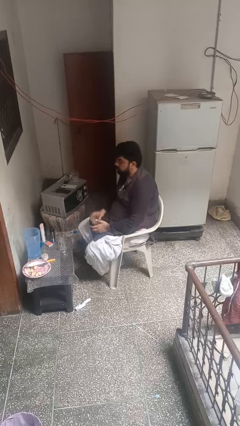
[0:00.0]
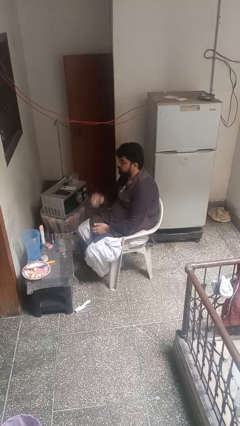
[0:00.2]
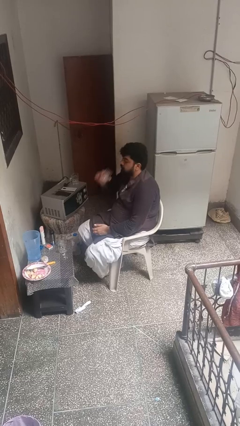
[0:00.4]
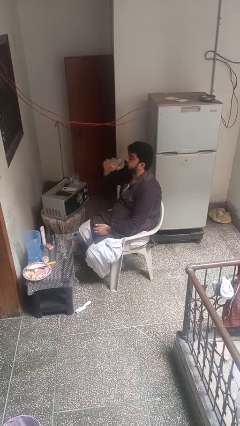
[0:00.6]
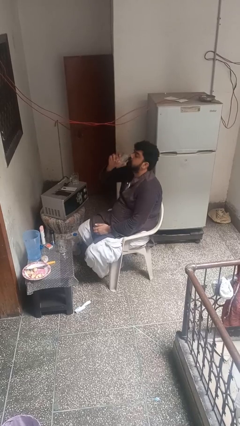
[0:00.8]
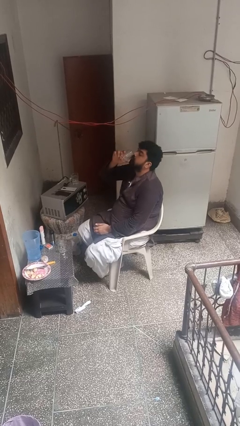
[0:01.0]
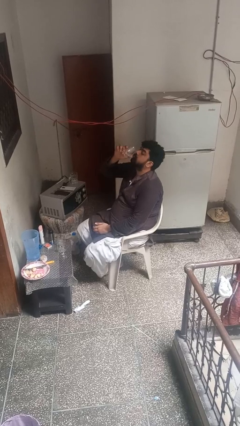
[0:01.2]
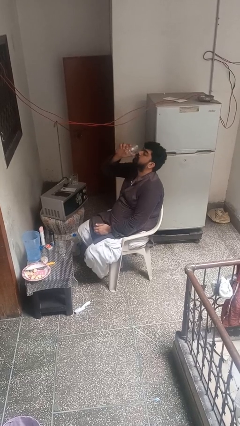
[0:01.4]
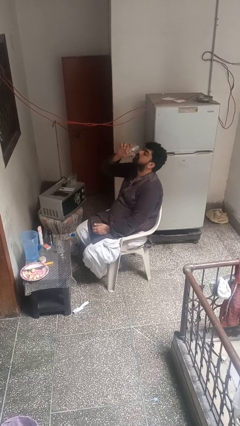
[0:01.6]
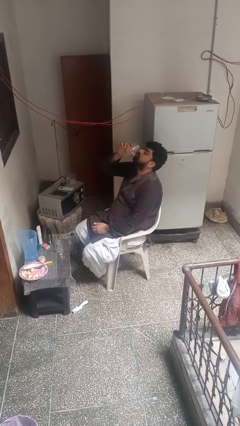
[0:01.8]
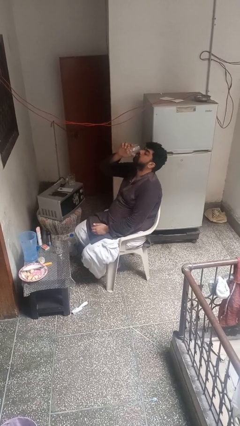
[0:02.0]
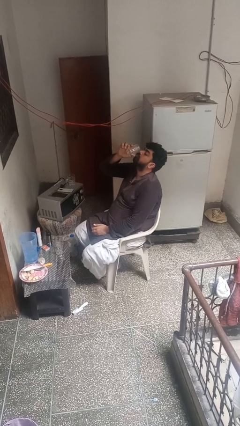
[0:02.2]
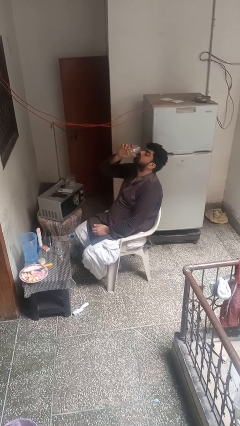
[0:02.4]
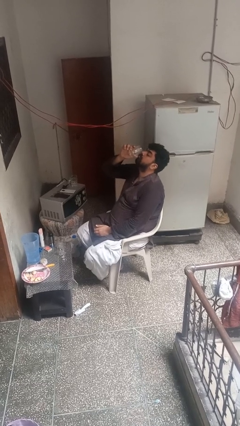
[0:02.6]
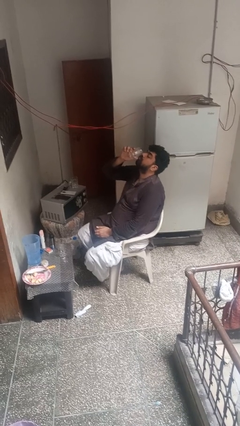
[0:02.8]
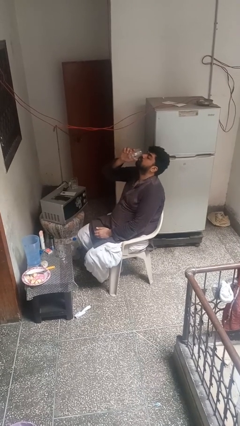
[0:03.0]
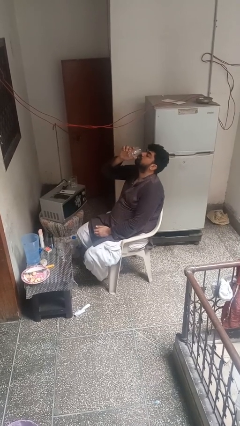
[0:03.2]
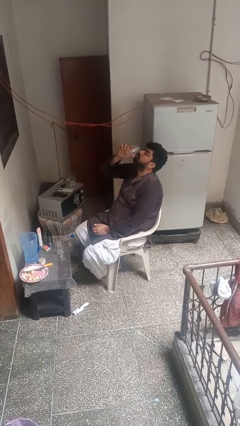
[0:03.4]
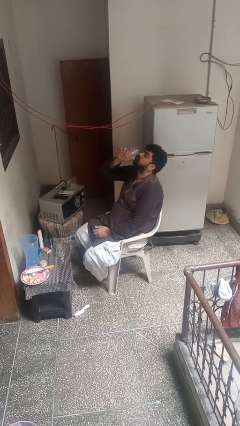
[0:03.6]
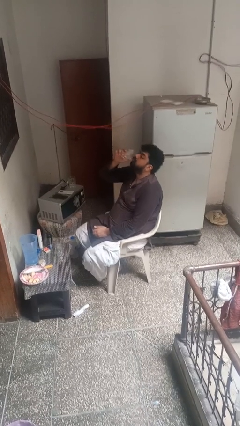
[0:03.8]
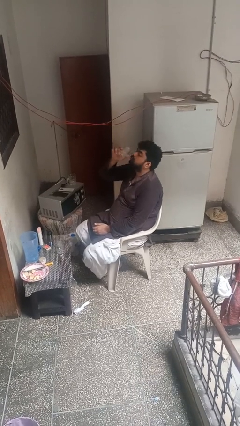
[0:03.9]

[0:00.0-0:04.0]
person drinks from shotglass

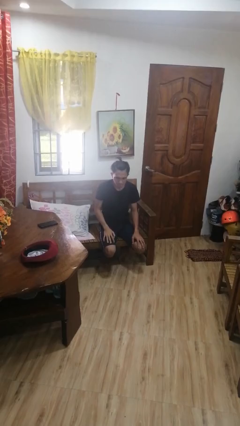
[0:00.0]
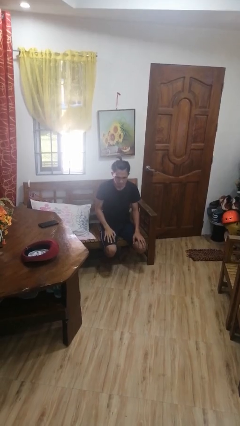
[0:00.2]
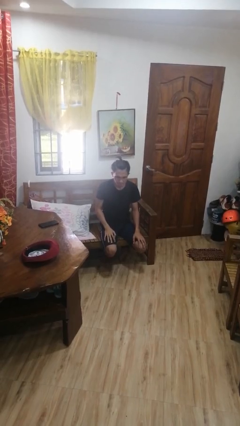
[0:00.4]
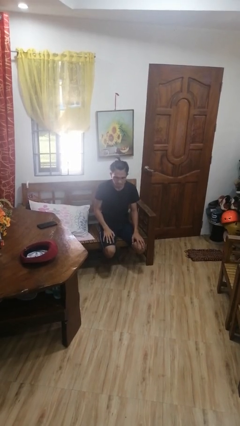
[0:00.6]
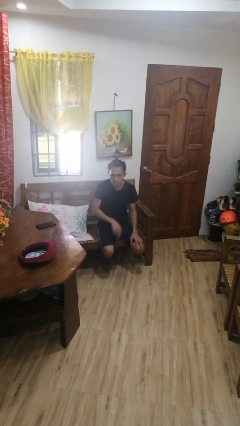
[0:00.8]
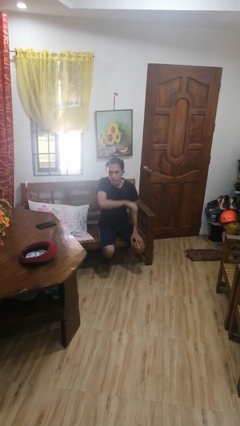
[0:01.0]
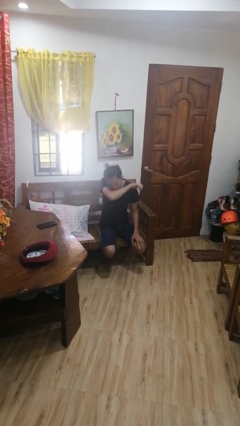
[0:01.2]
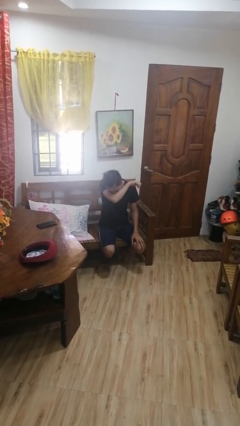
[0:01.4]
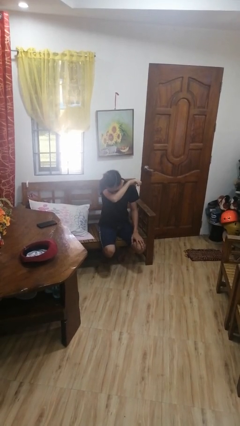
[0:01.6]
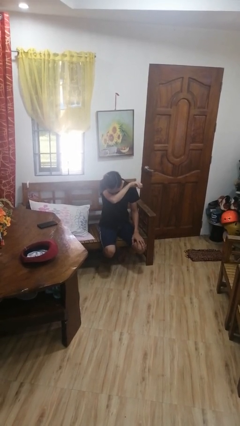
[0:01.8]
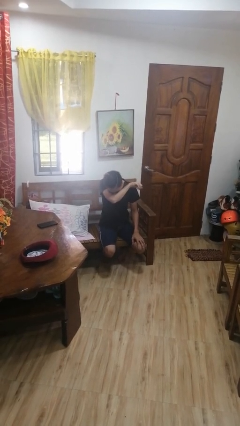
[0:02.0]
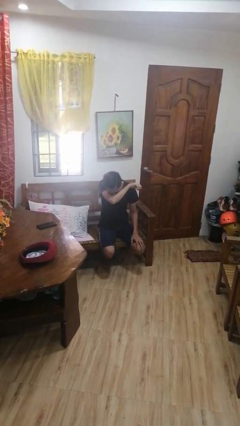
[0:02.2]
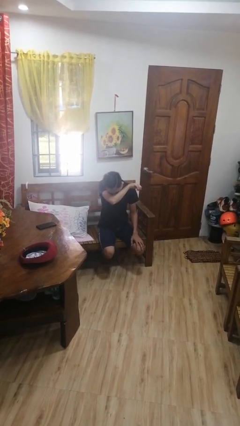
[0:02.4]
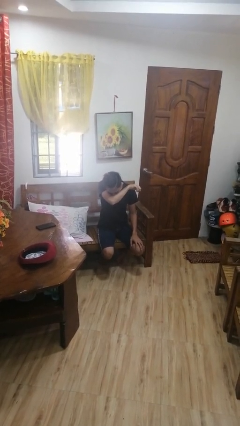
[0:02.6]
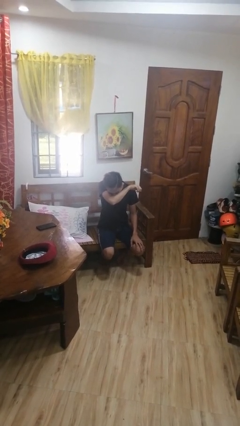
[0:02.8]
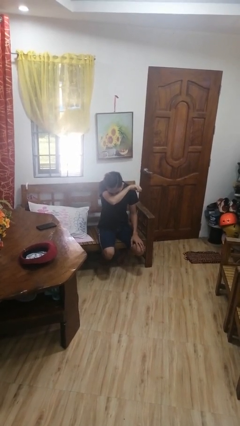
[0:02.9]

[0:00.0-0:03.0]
person sneezes into arm

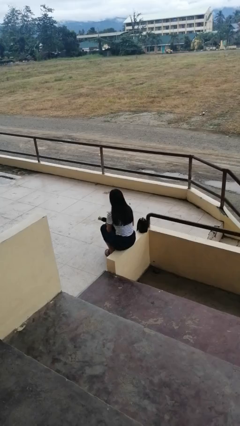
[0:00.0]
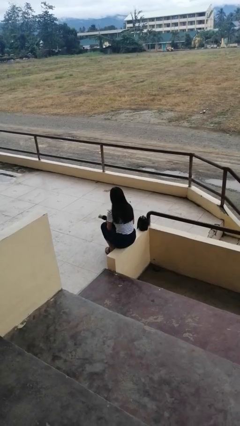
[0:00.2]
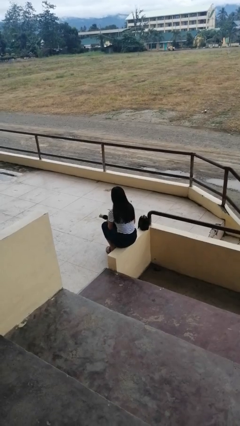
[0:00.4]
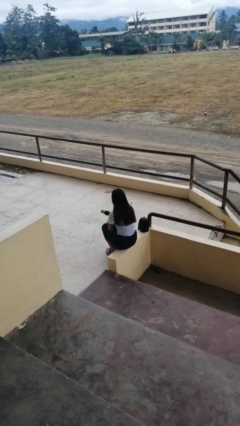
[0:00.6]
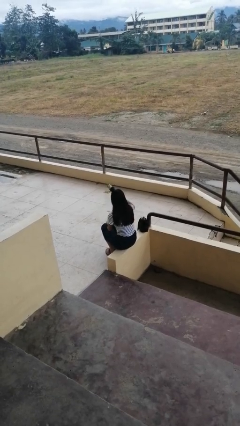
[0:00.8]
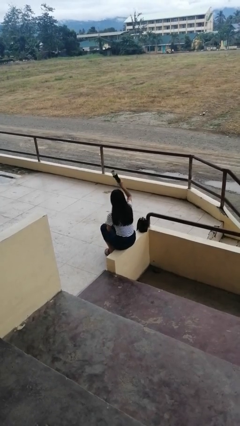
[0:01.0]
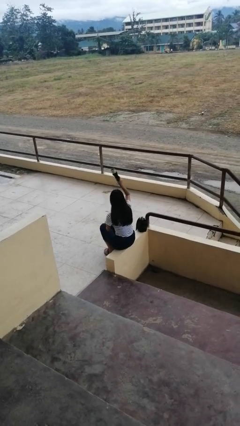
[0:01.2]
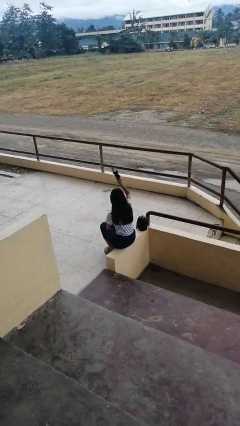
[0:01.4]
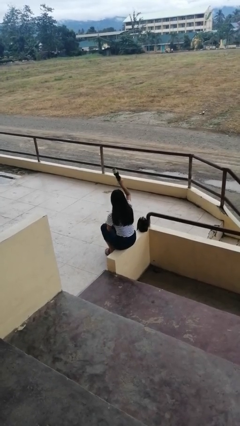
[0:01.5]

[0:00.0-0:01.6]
person holds object above head

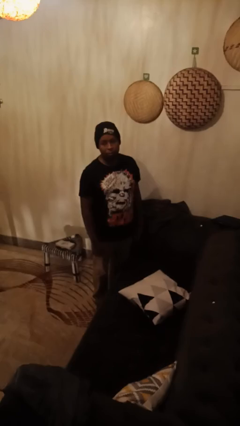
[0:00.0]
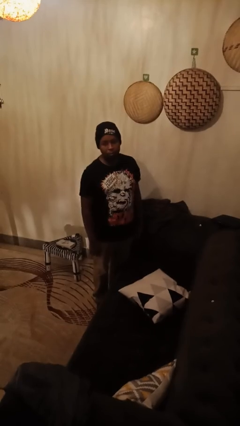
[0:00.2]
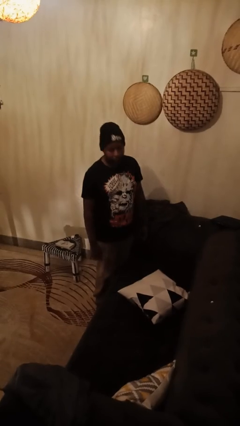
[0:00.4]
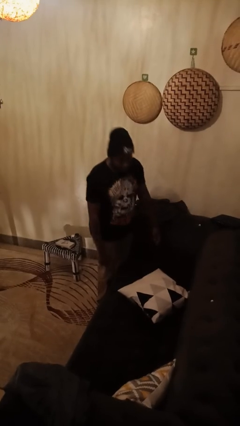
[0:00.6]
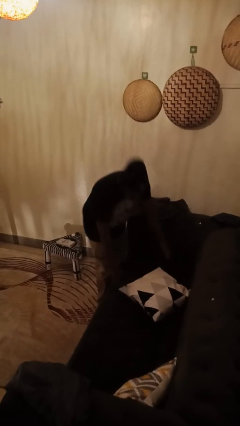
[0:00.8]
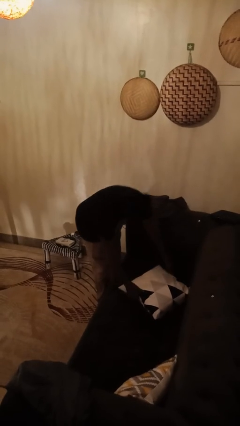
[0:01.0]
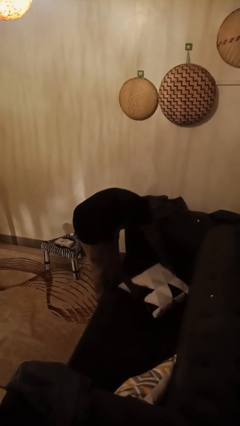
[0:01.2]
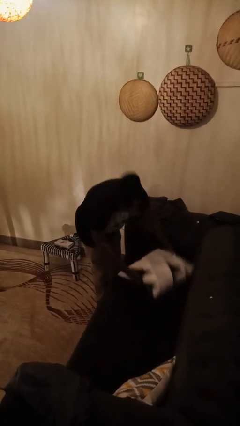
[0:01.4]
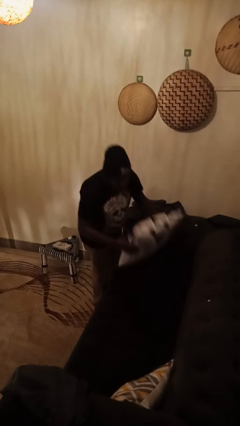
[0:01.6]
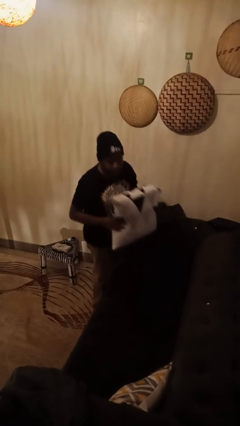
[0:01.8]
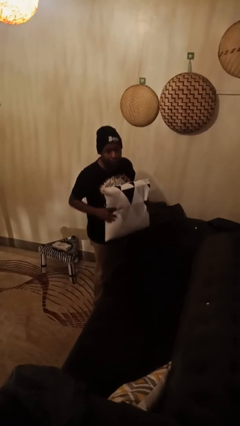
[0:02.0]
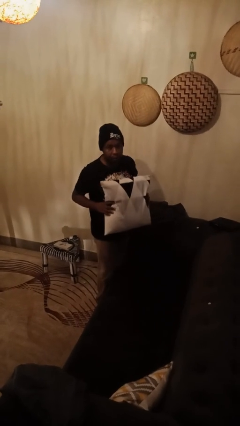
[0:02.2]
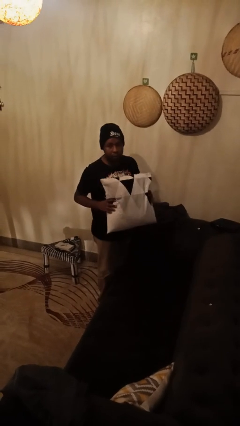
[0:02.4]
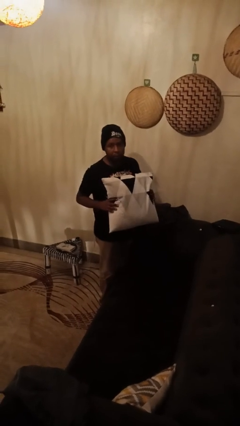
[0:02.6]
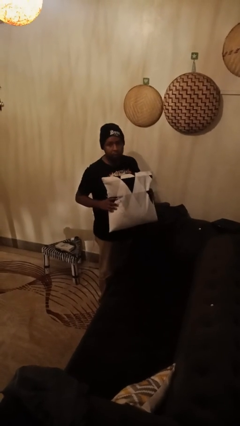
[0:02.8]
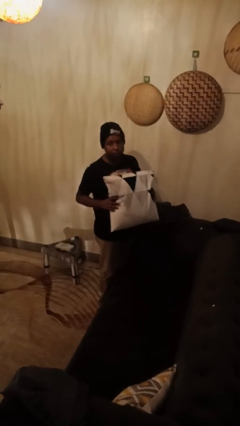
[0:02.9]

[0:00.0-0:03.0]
person picks up object from couch

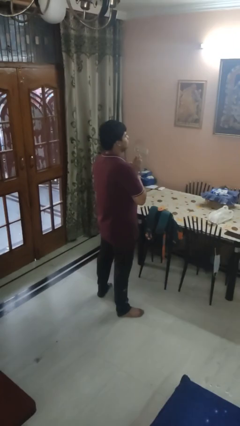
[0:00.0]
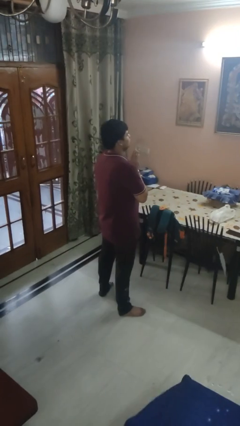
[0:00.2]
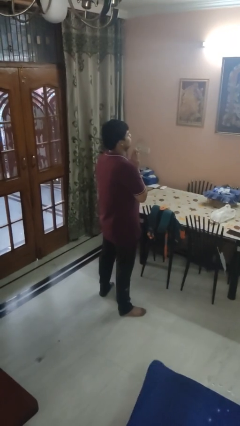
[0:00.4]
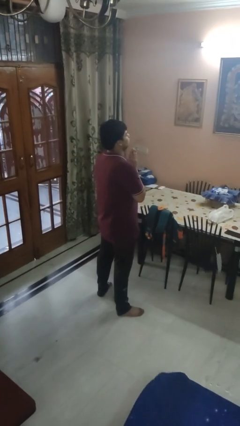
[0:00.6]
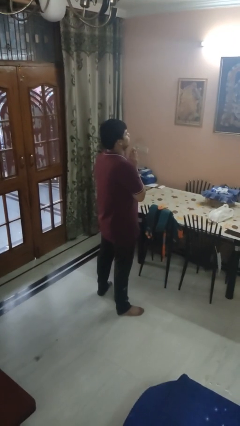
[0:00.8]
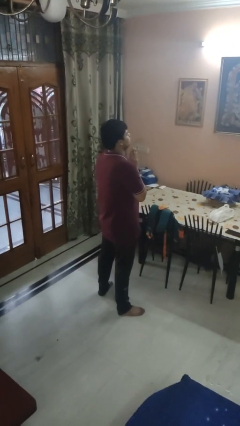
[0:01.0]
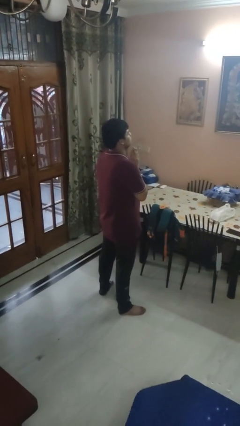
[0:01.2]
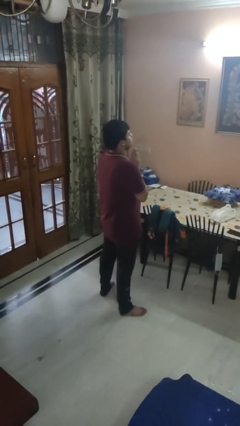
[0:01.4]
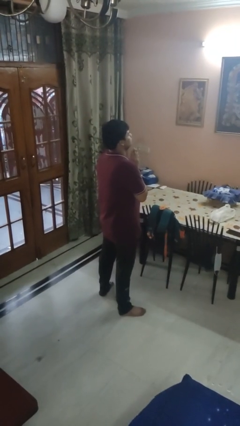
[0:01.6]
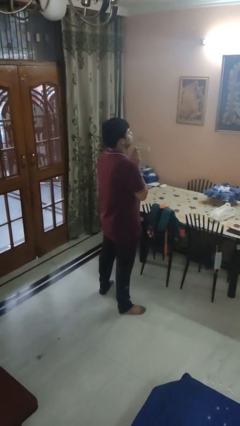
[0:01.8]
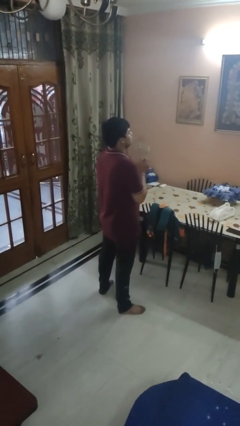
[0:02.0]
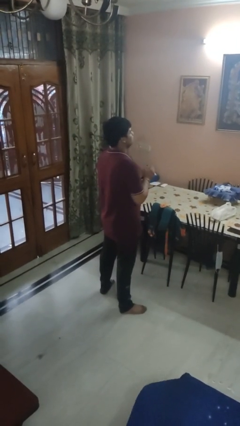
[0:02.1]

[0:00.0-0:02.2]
person prays

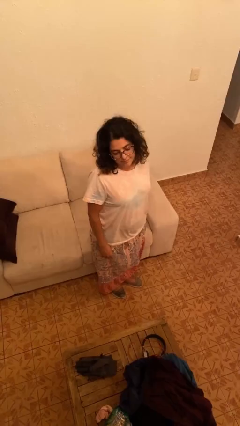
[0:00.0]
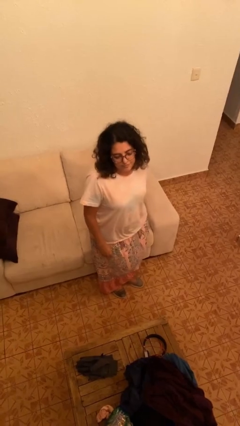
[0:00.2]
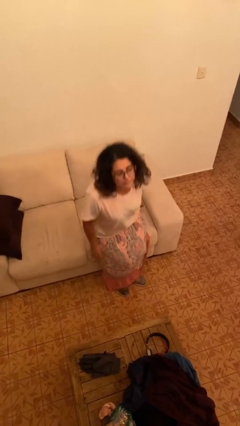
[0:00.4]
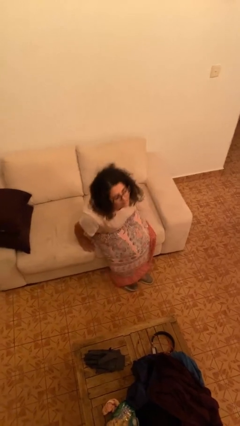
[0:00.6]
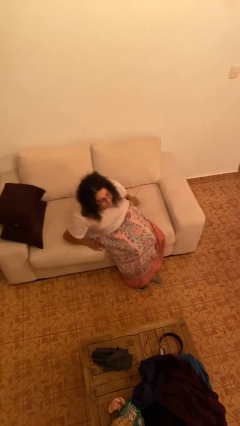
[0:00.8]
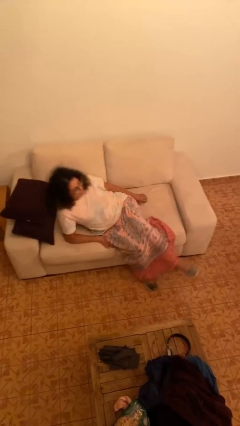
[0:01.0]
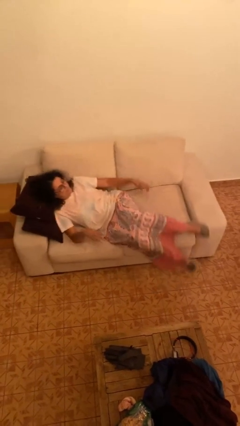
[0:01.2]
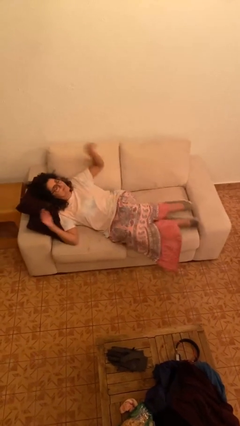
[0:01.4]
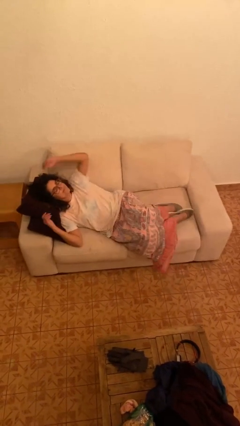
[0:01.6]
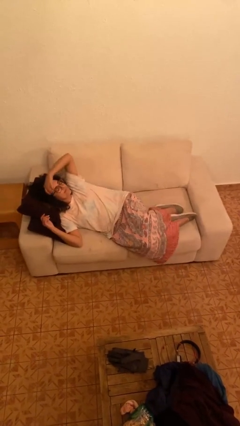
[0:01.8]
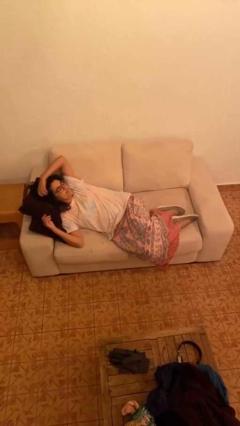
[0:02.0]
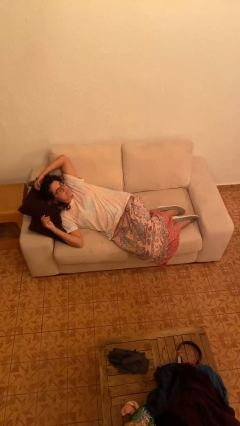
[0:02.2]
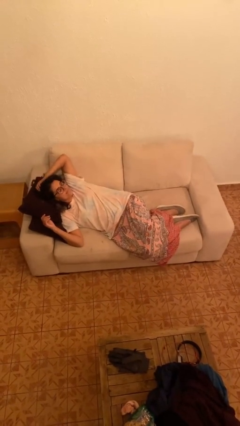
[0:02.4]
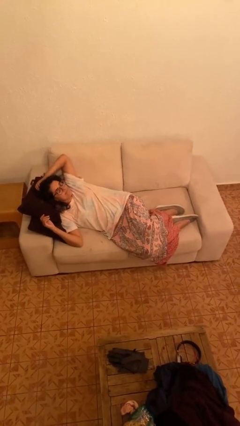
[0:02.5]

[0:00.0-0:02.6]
person lies down on couch

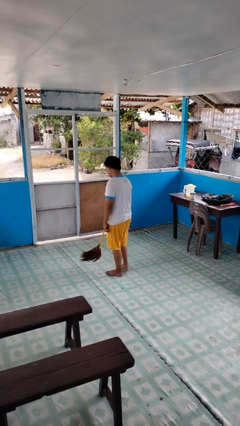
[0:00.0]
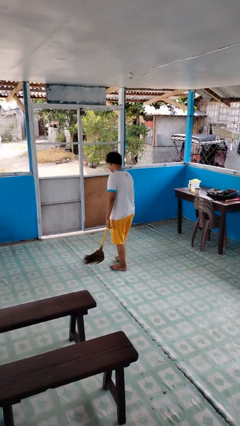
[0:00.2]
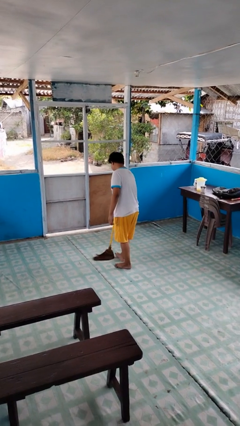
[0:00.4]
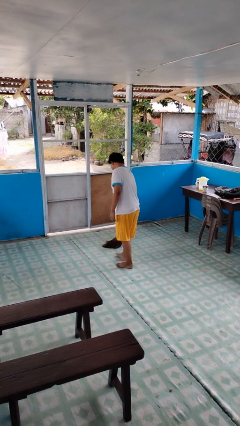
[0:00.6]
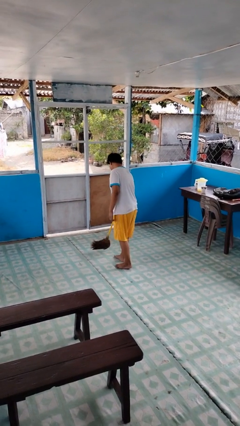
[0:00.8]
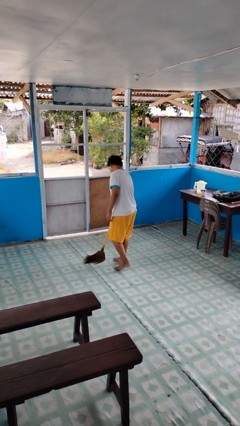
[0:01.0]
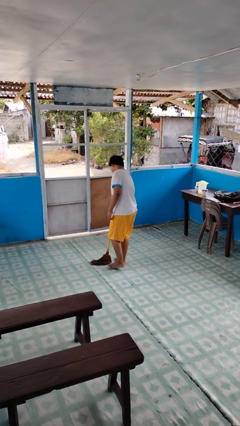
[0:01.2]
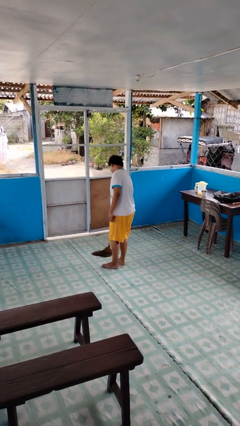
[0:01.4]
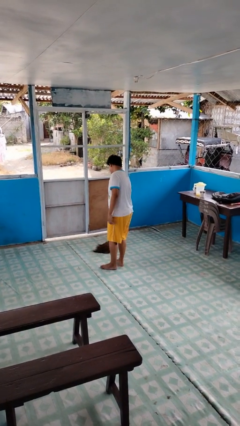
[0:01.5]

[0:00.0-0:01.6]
person sweeps floor
